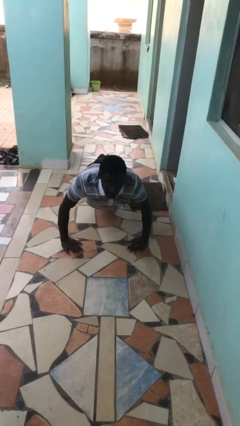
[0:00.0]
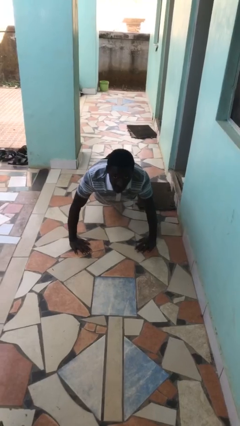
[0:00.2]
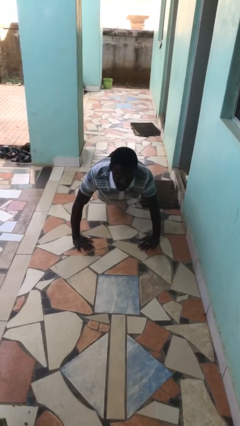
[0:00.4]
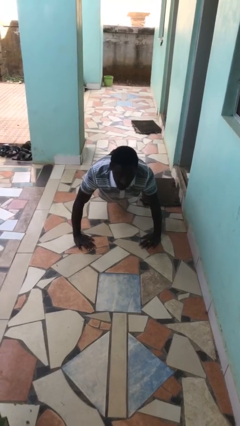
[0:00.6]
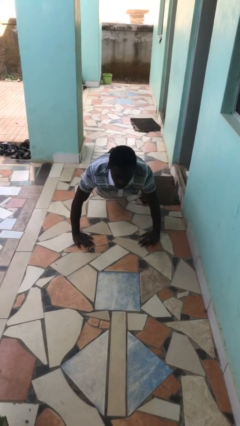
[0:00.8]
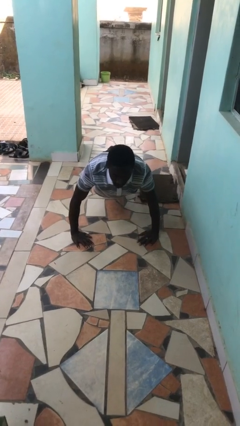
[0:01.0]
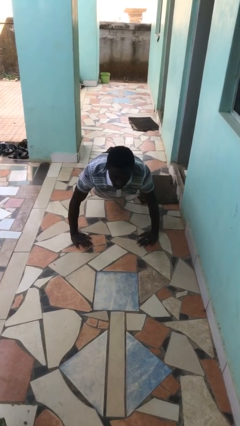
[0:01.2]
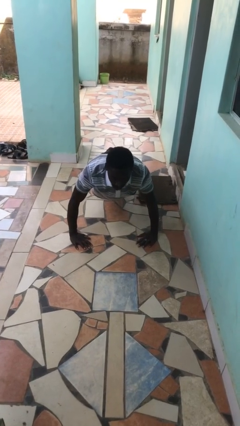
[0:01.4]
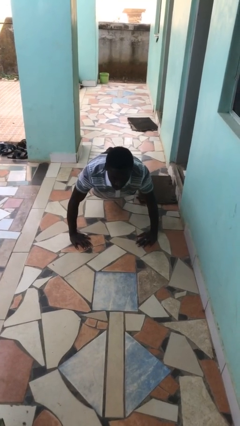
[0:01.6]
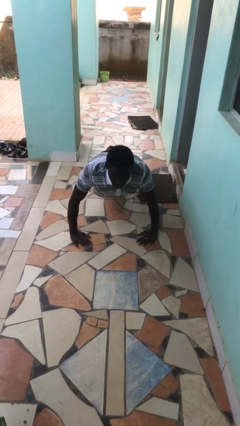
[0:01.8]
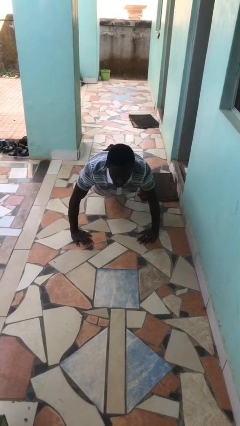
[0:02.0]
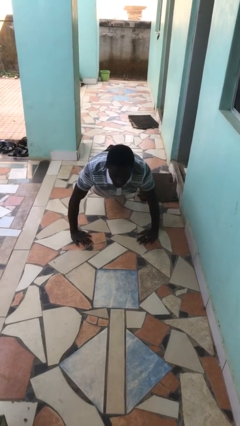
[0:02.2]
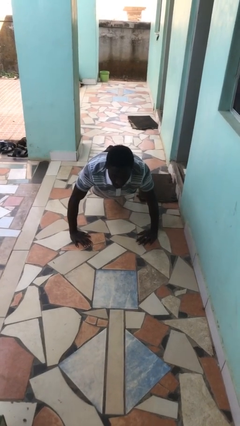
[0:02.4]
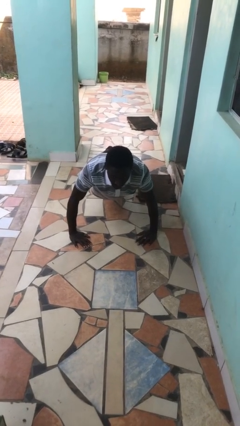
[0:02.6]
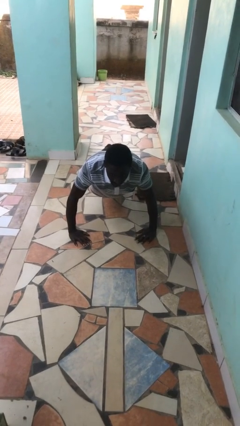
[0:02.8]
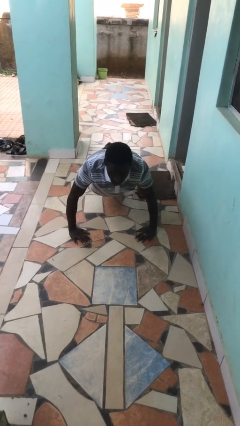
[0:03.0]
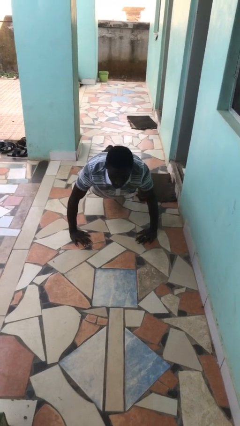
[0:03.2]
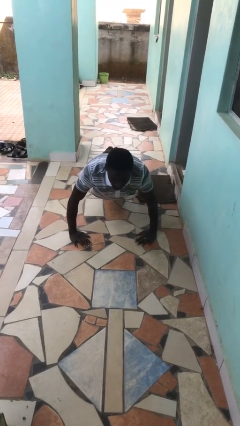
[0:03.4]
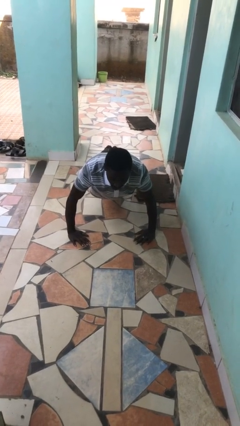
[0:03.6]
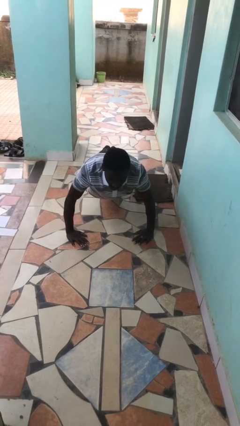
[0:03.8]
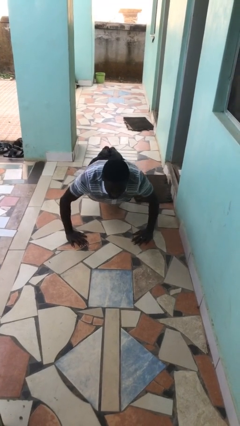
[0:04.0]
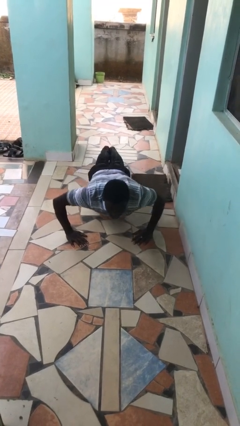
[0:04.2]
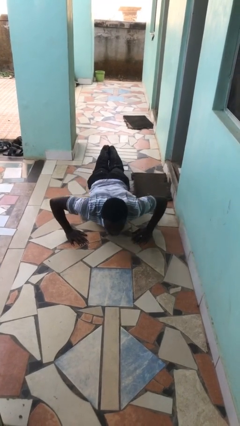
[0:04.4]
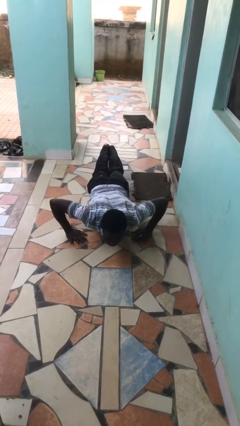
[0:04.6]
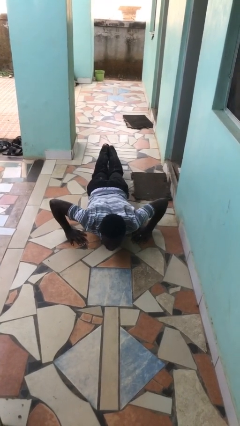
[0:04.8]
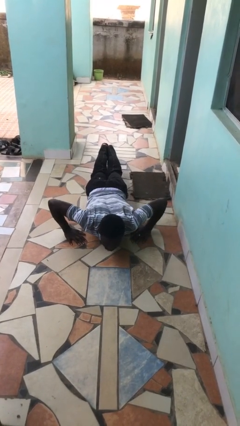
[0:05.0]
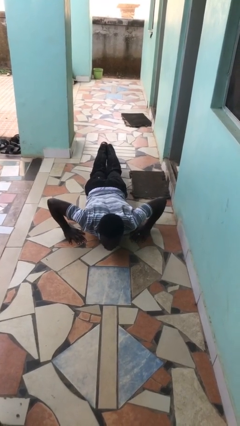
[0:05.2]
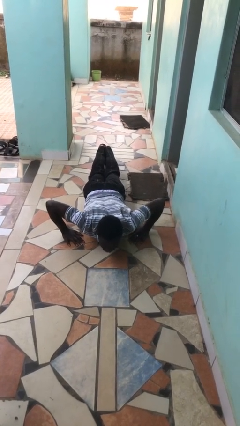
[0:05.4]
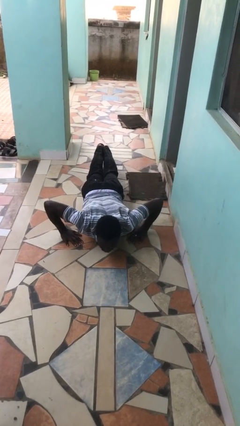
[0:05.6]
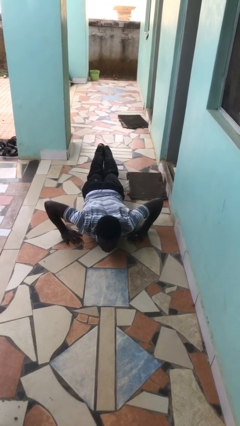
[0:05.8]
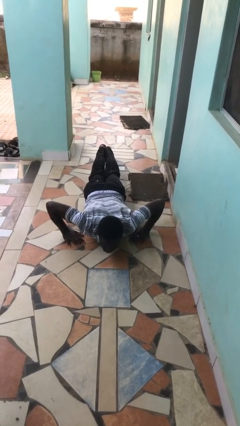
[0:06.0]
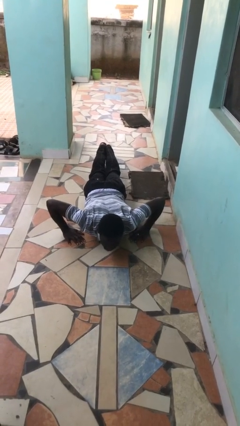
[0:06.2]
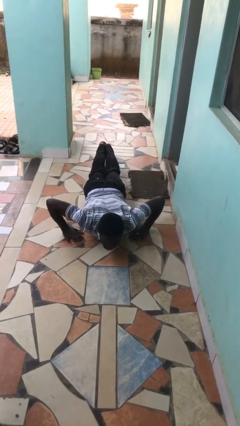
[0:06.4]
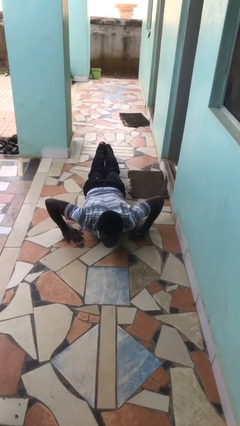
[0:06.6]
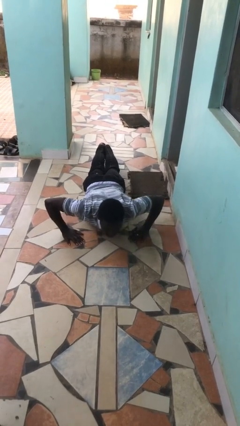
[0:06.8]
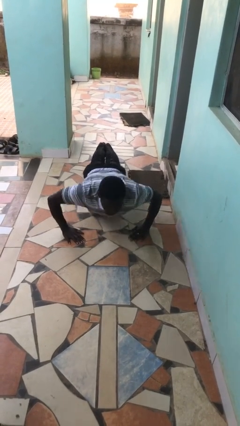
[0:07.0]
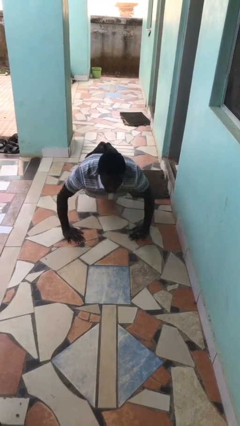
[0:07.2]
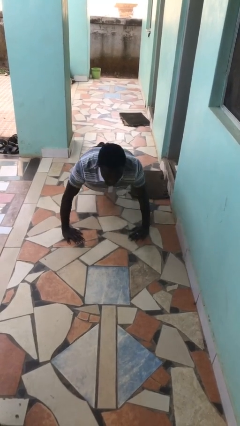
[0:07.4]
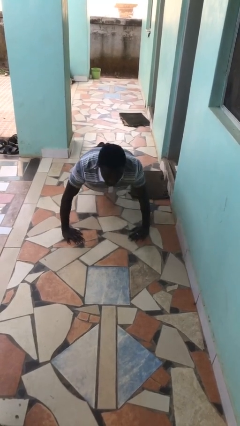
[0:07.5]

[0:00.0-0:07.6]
person exercises with pushup

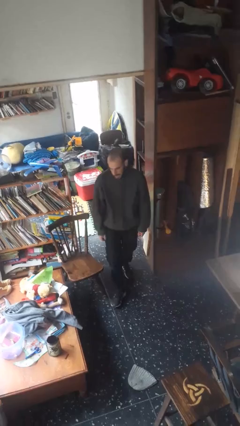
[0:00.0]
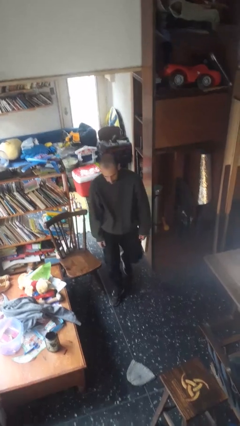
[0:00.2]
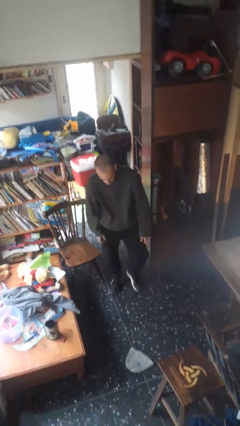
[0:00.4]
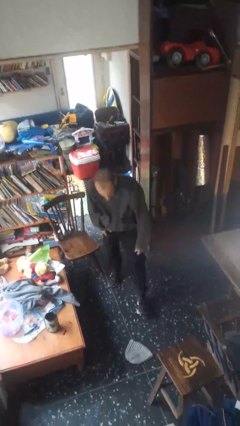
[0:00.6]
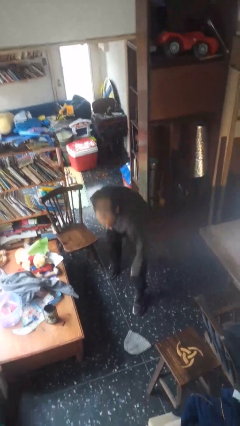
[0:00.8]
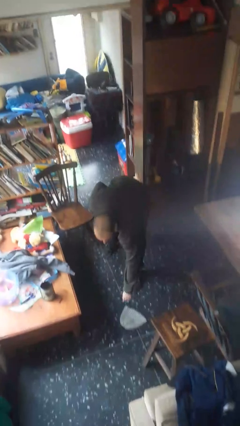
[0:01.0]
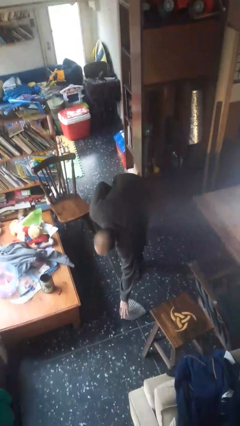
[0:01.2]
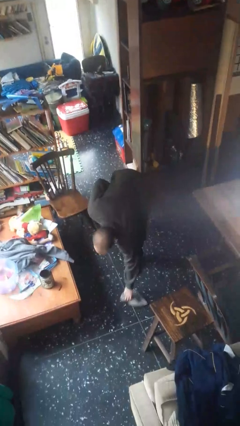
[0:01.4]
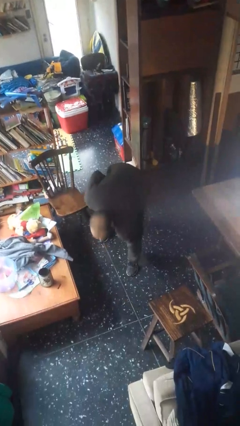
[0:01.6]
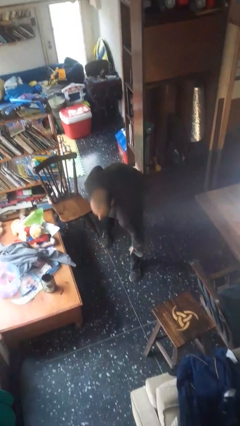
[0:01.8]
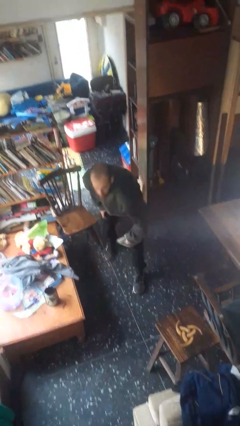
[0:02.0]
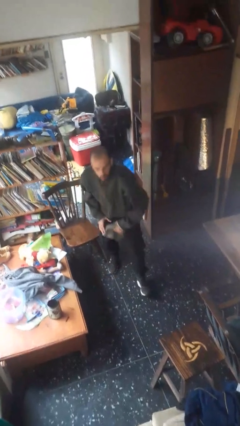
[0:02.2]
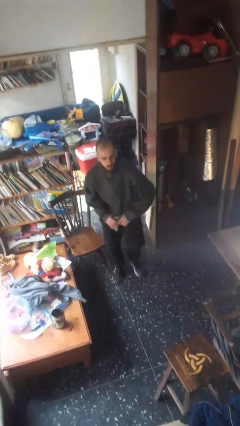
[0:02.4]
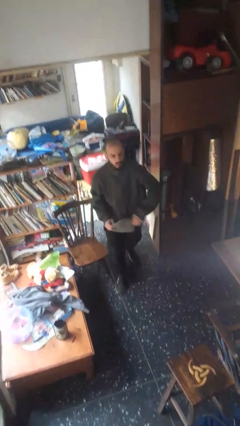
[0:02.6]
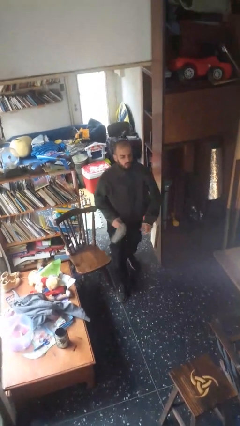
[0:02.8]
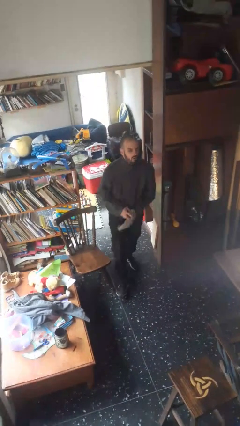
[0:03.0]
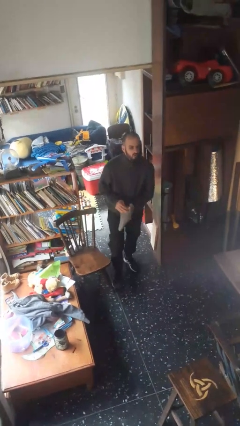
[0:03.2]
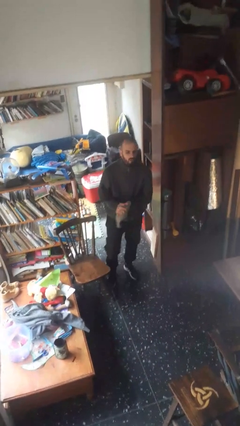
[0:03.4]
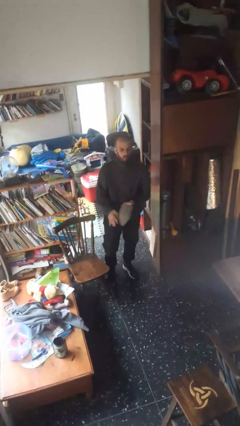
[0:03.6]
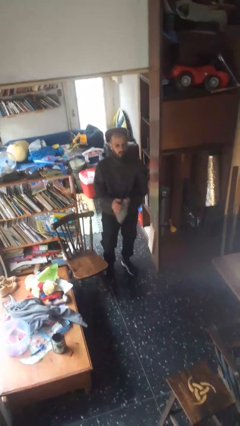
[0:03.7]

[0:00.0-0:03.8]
person picks up object from floor

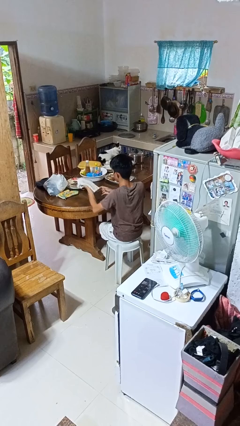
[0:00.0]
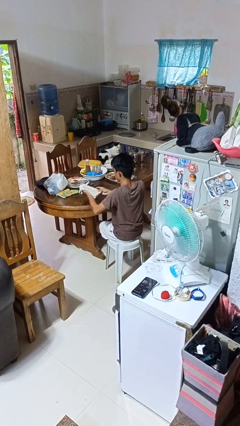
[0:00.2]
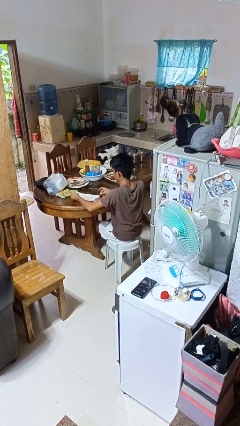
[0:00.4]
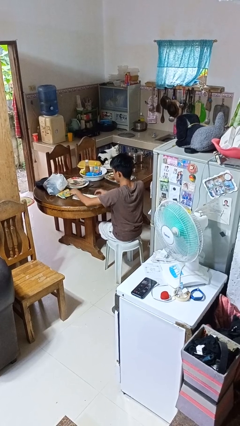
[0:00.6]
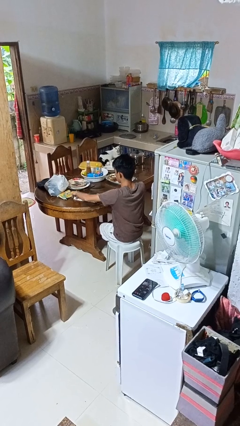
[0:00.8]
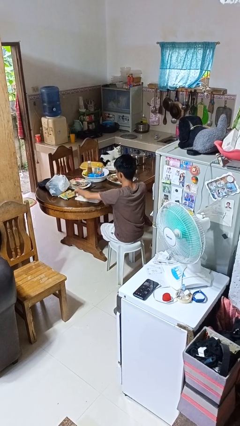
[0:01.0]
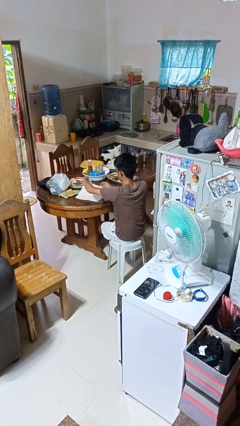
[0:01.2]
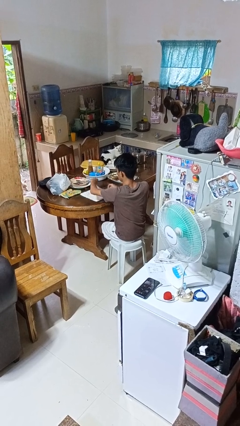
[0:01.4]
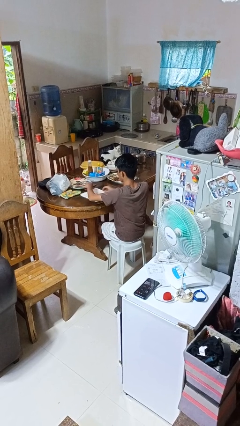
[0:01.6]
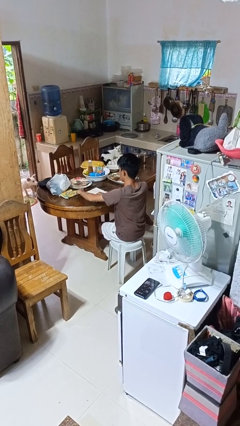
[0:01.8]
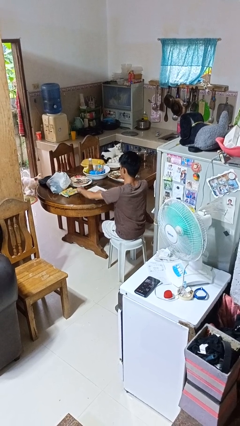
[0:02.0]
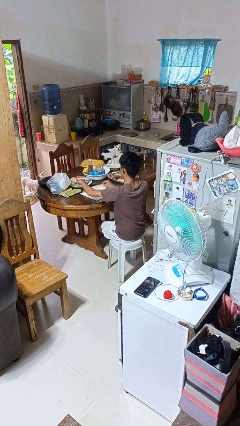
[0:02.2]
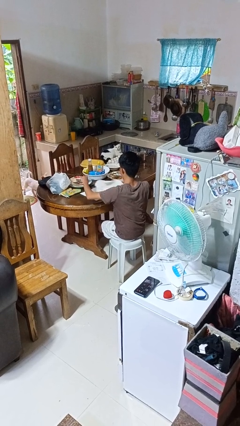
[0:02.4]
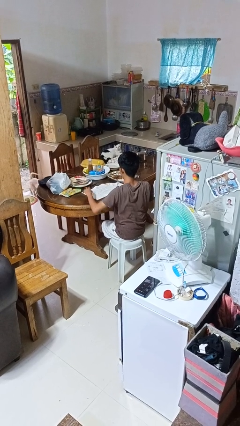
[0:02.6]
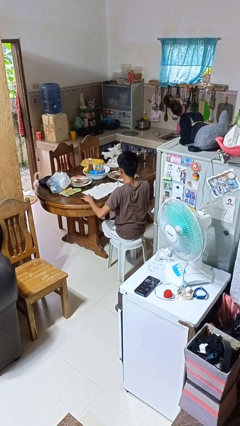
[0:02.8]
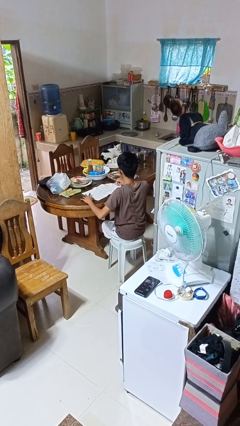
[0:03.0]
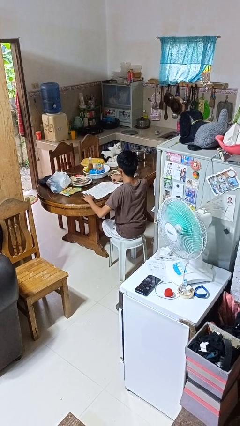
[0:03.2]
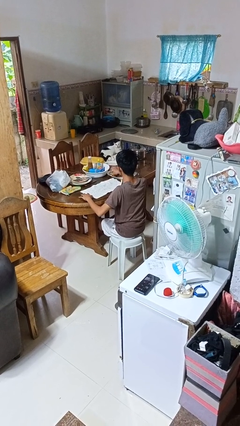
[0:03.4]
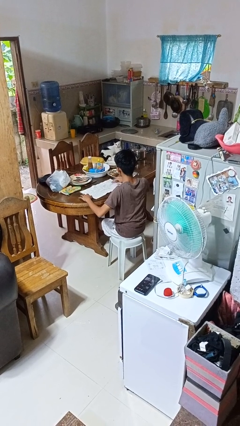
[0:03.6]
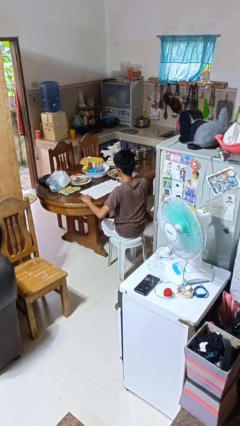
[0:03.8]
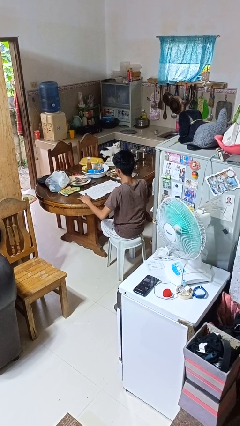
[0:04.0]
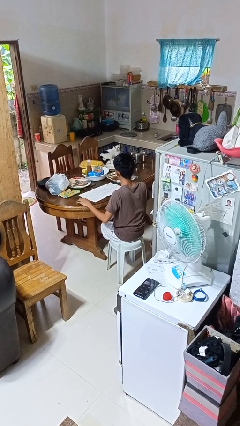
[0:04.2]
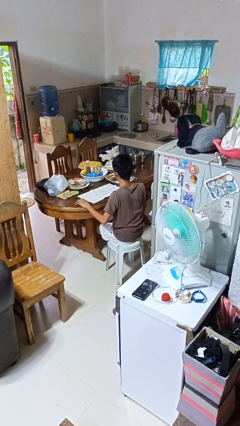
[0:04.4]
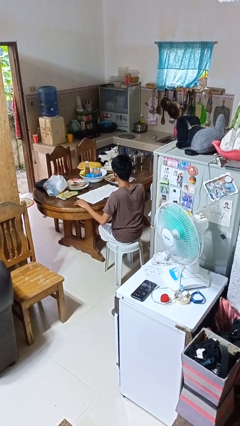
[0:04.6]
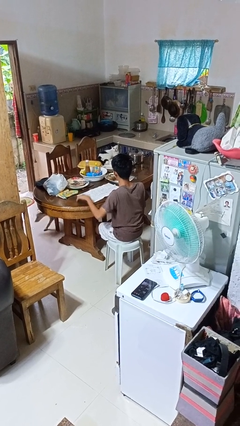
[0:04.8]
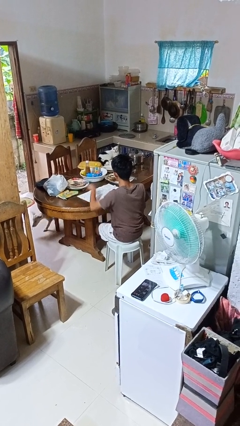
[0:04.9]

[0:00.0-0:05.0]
person spreads tablecloth

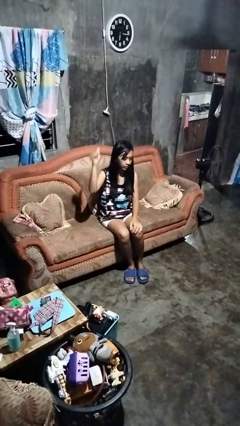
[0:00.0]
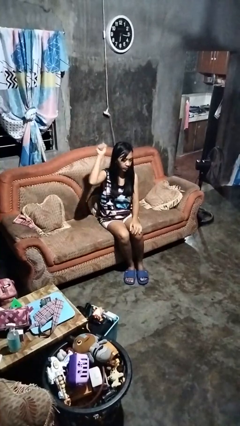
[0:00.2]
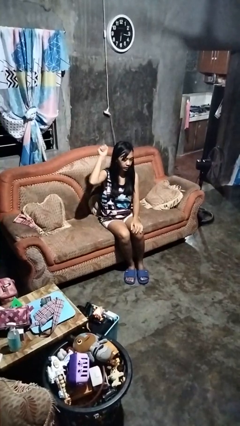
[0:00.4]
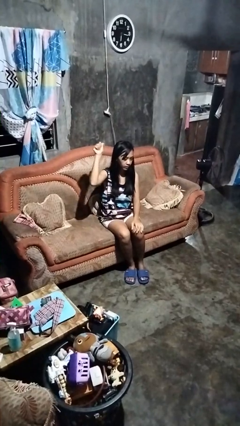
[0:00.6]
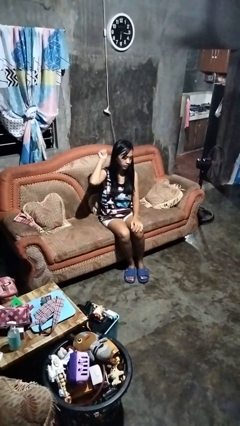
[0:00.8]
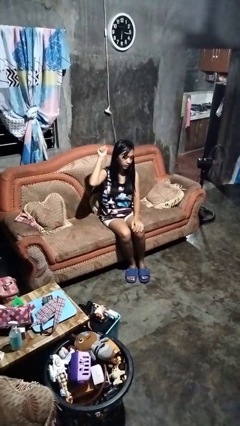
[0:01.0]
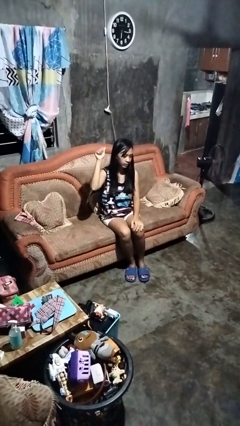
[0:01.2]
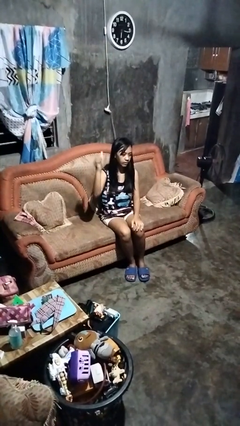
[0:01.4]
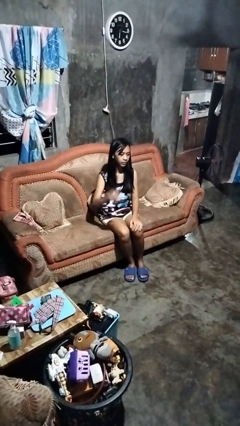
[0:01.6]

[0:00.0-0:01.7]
person gestures behind me
